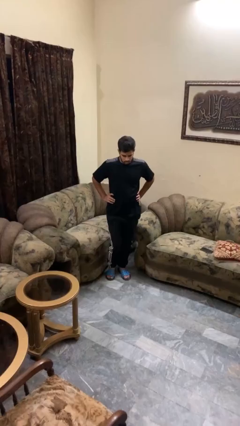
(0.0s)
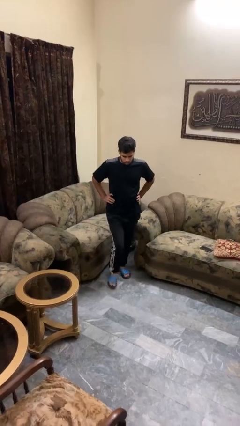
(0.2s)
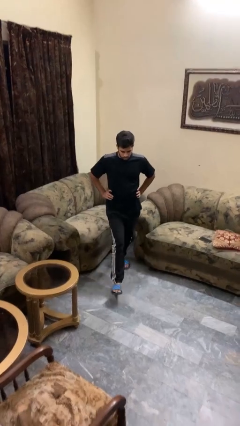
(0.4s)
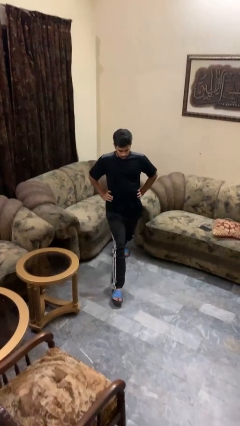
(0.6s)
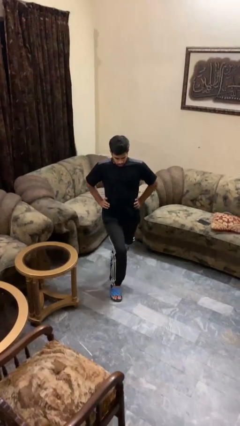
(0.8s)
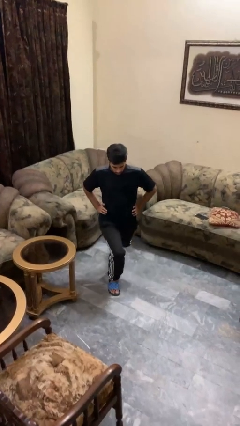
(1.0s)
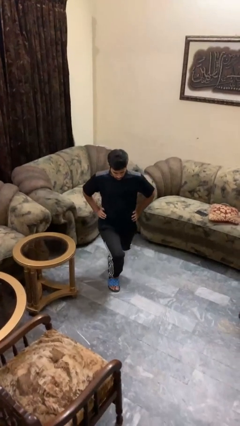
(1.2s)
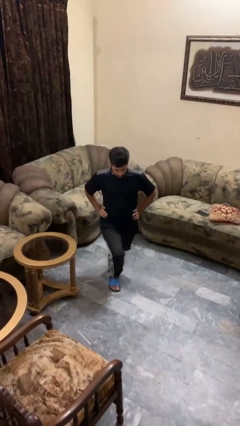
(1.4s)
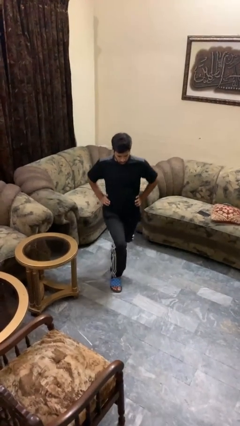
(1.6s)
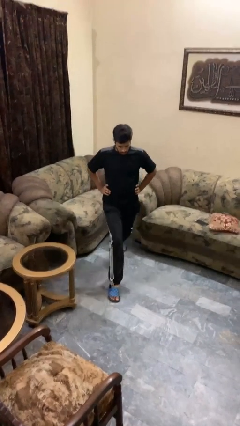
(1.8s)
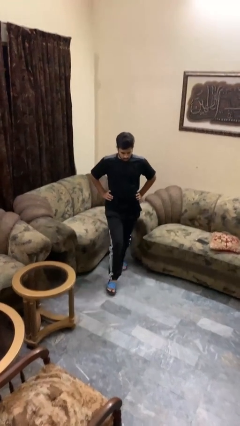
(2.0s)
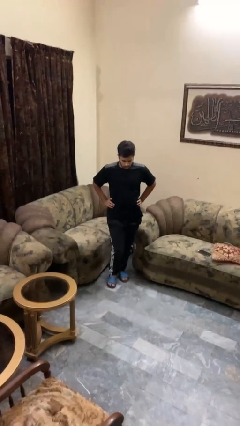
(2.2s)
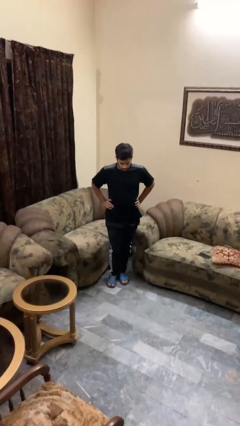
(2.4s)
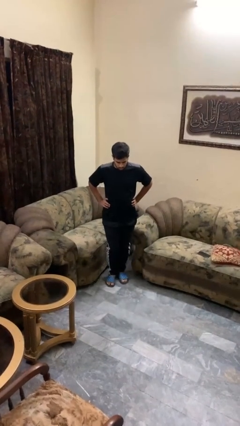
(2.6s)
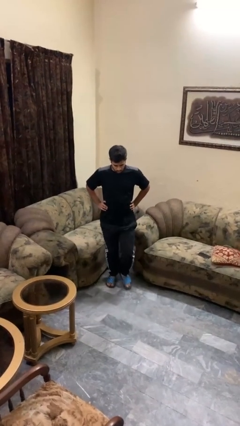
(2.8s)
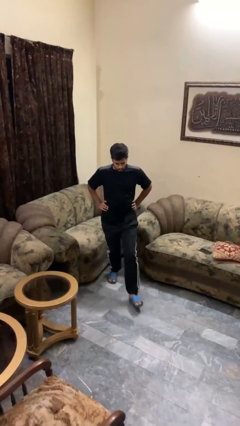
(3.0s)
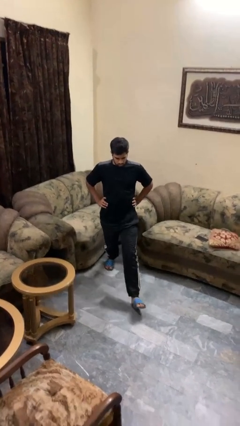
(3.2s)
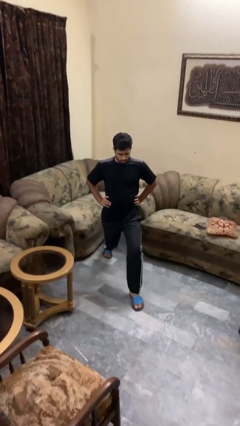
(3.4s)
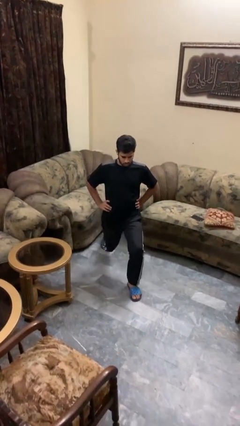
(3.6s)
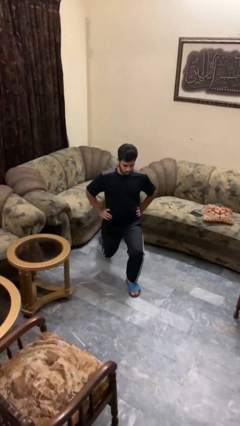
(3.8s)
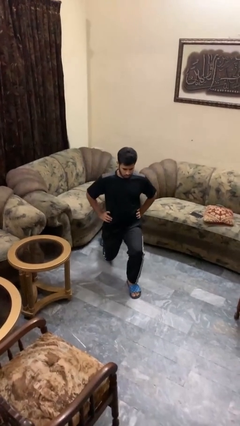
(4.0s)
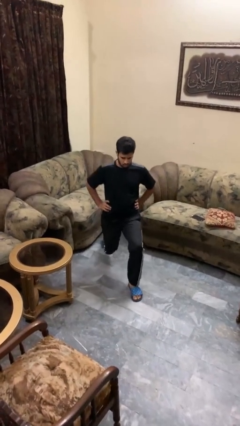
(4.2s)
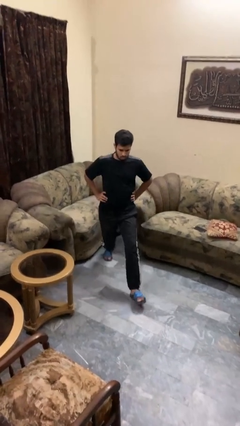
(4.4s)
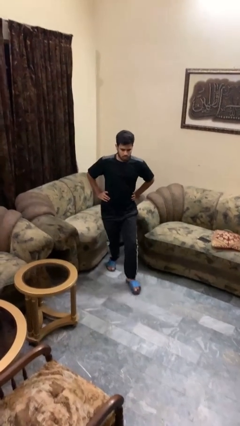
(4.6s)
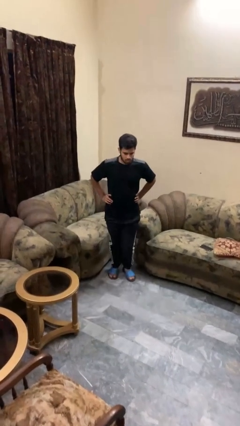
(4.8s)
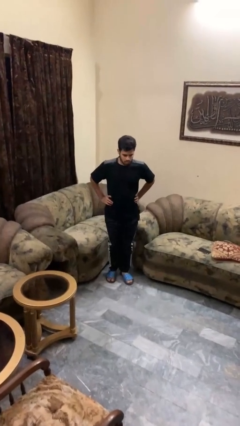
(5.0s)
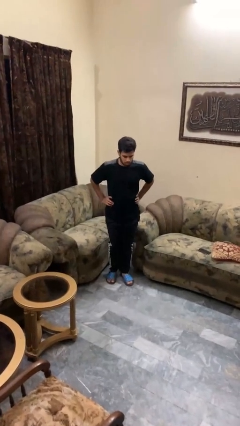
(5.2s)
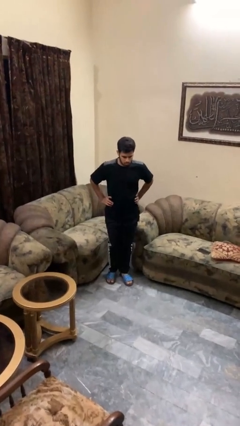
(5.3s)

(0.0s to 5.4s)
person exercises with lunges

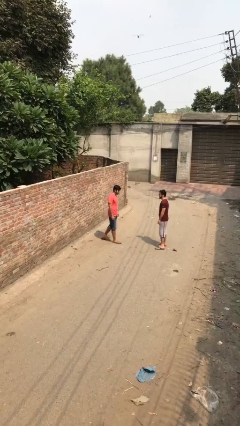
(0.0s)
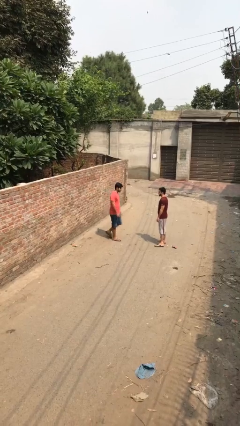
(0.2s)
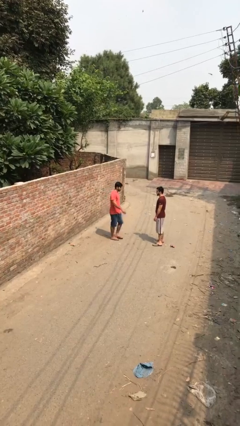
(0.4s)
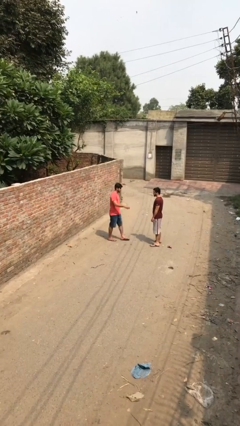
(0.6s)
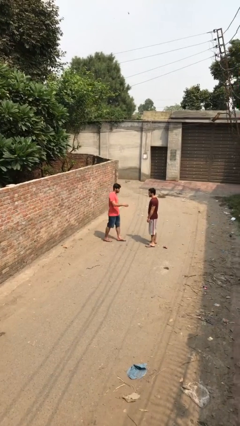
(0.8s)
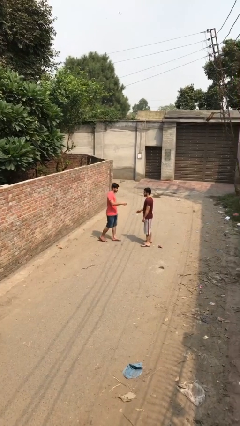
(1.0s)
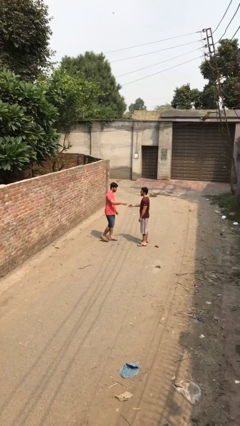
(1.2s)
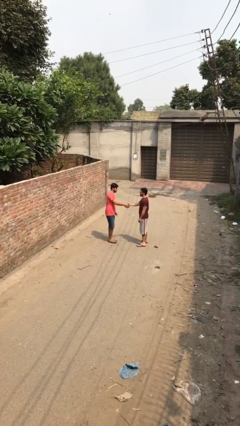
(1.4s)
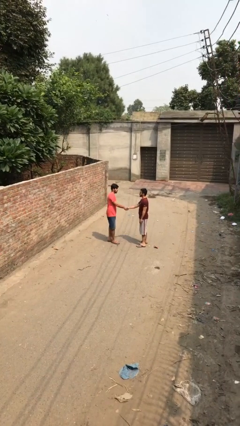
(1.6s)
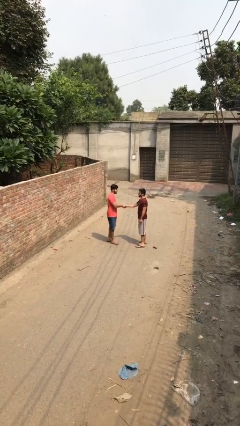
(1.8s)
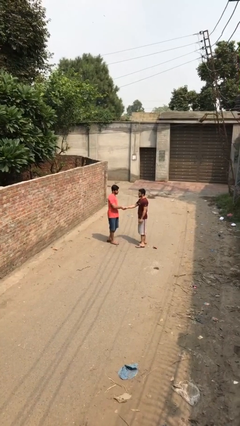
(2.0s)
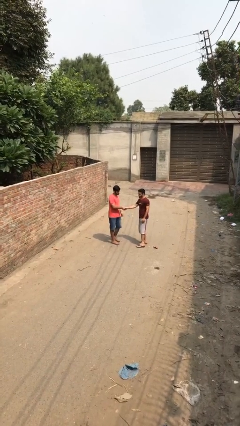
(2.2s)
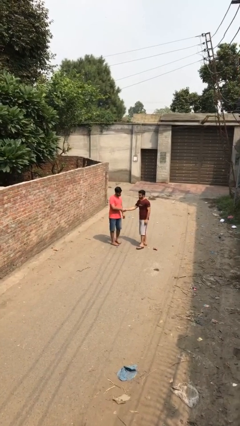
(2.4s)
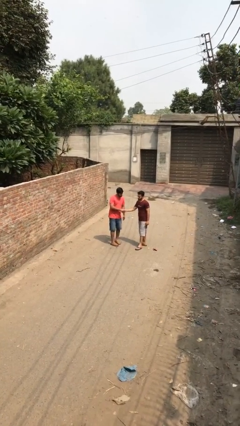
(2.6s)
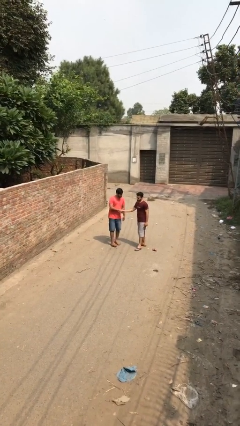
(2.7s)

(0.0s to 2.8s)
person shakes hand

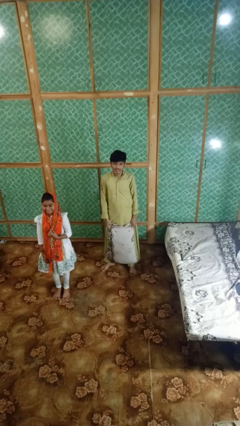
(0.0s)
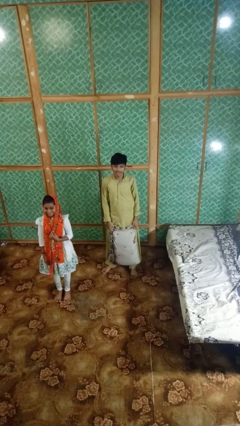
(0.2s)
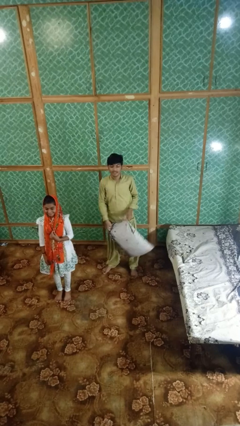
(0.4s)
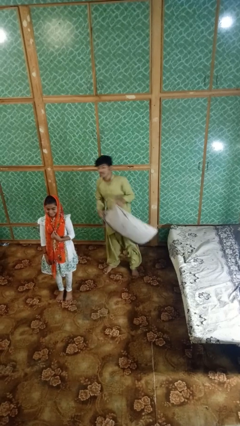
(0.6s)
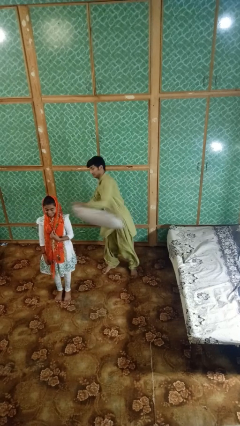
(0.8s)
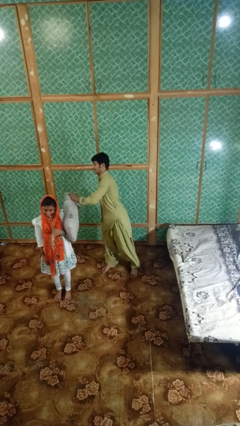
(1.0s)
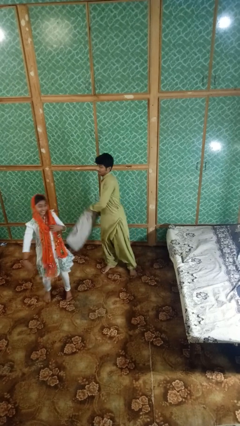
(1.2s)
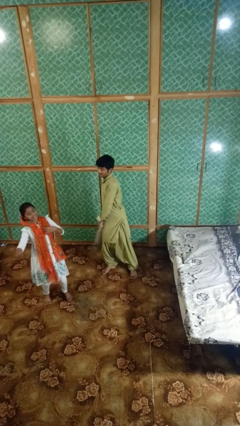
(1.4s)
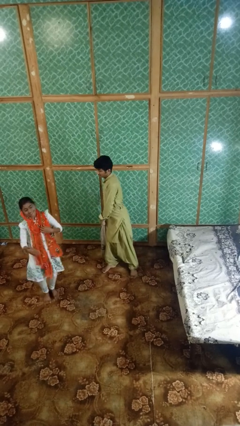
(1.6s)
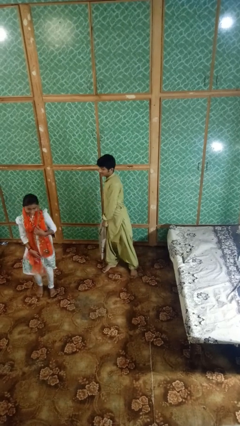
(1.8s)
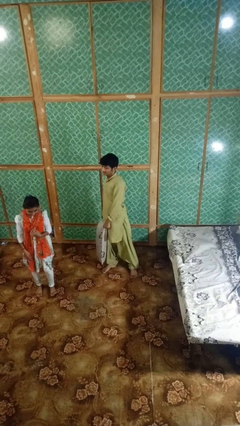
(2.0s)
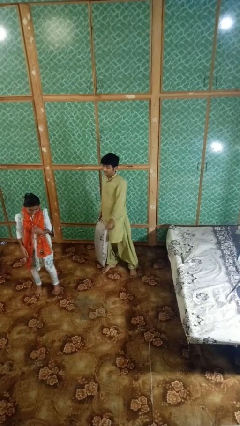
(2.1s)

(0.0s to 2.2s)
person hits person with pillow

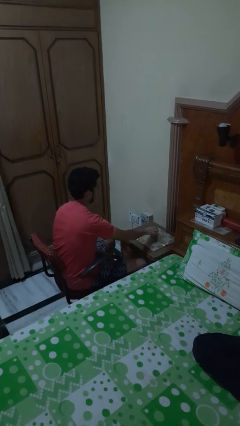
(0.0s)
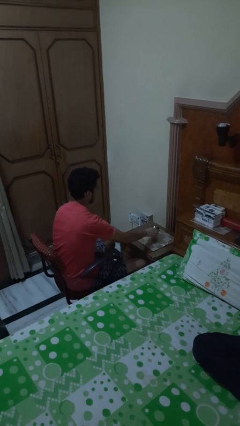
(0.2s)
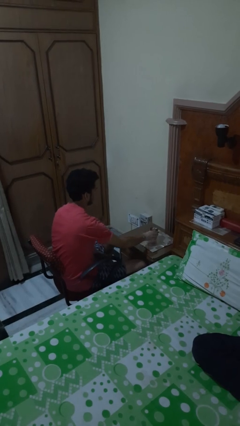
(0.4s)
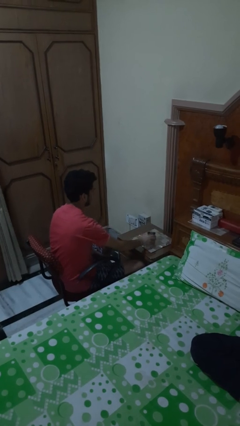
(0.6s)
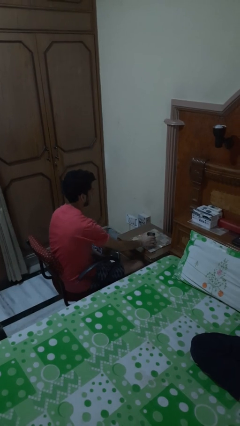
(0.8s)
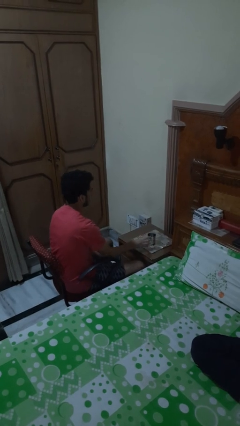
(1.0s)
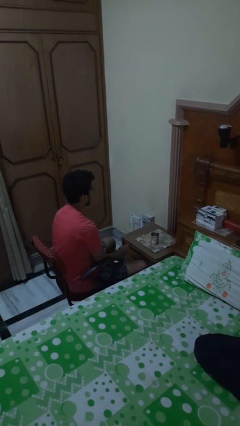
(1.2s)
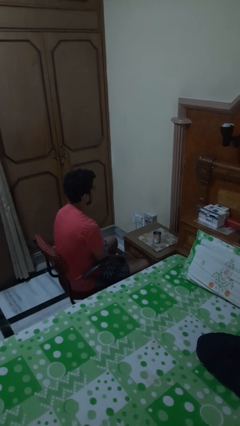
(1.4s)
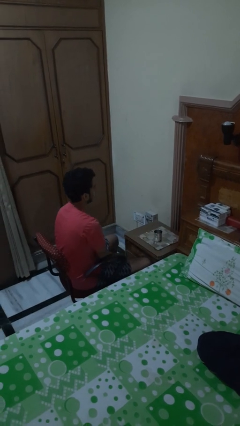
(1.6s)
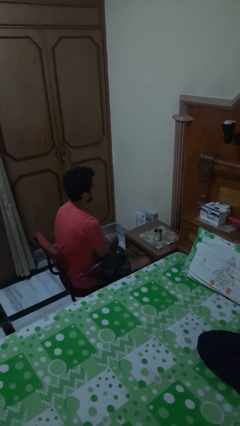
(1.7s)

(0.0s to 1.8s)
person sets upright glass

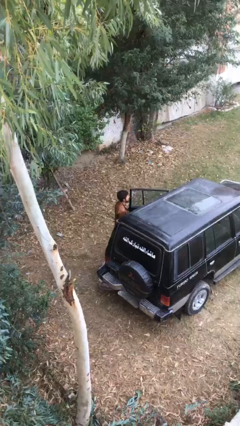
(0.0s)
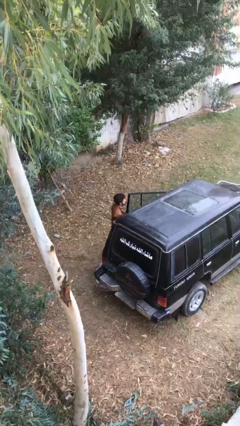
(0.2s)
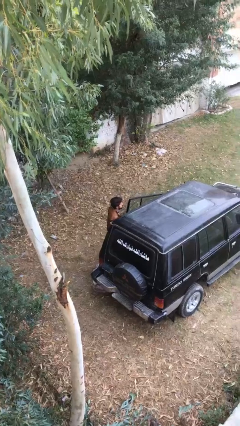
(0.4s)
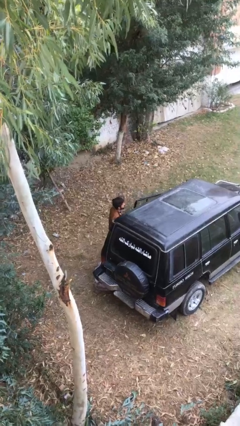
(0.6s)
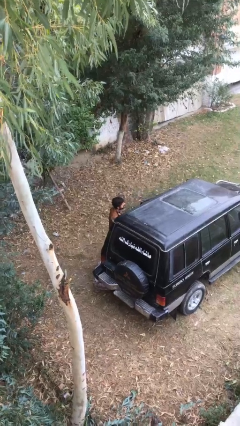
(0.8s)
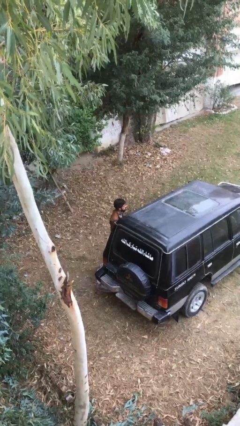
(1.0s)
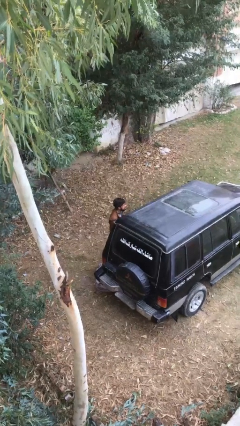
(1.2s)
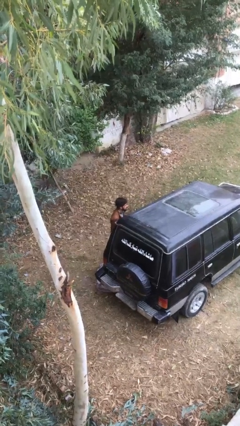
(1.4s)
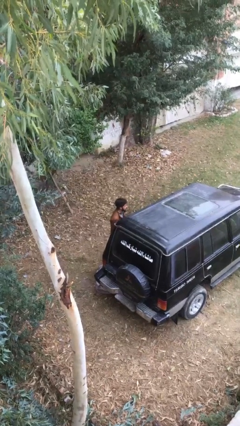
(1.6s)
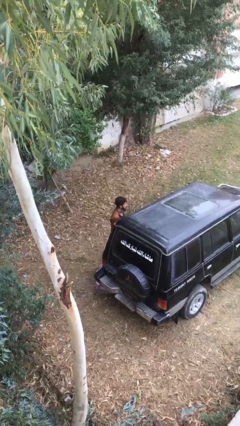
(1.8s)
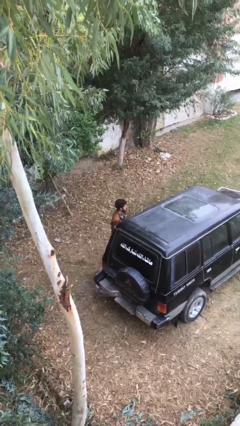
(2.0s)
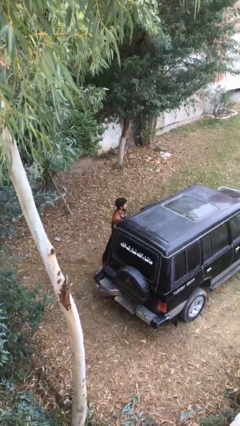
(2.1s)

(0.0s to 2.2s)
person closes car door

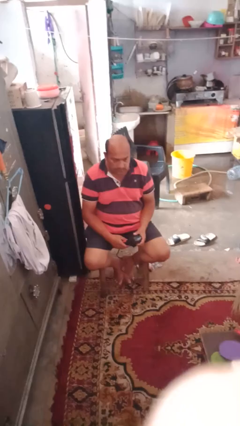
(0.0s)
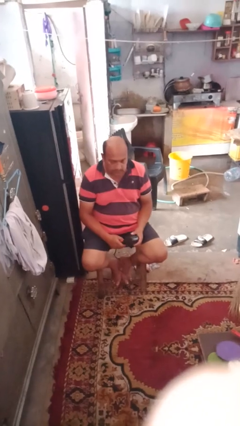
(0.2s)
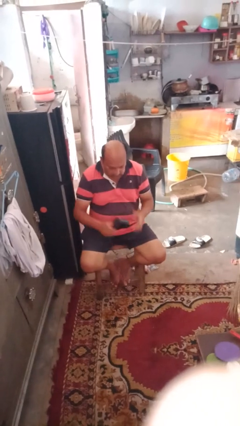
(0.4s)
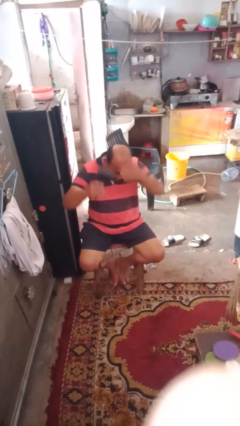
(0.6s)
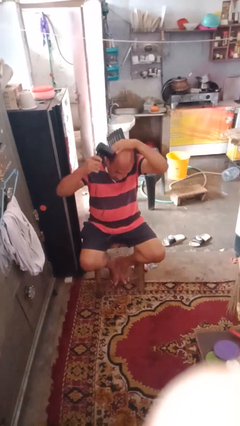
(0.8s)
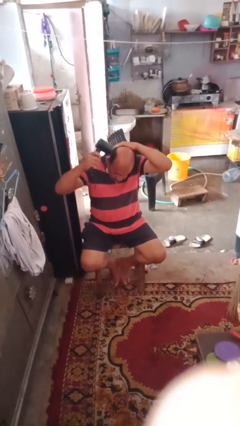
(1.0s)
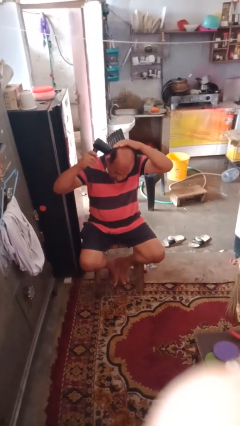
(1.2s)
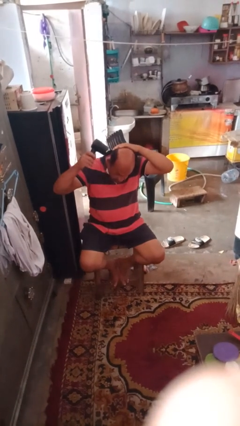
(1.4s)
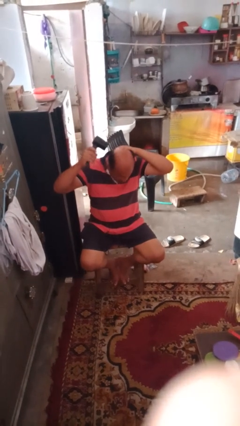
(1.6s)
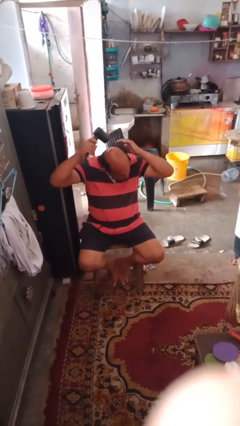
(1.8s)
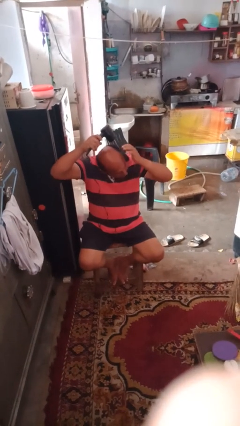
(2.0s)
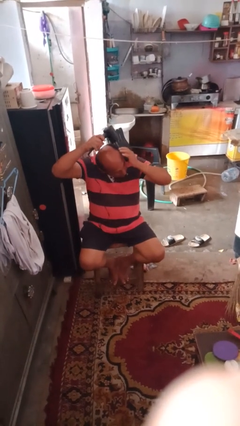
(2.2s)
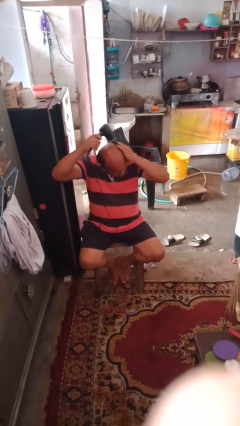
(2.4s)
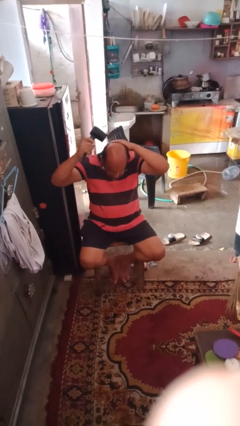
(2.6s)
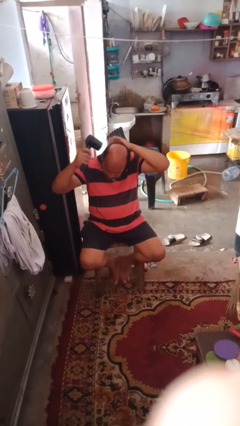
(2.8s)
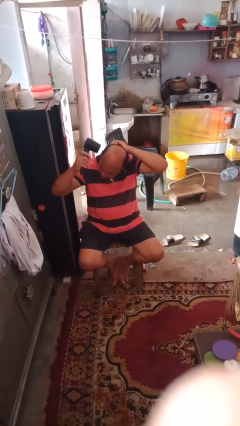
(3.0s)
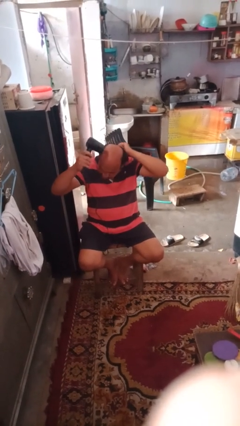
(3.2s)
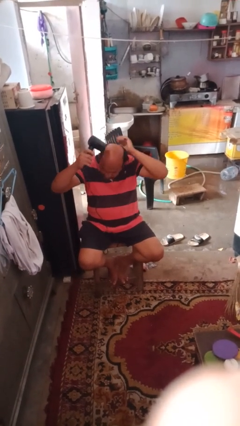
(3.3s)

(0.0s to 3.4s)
person dries hair with hairdryer
